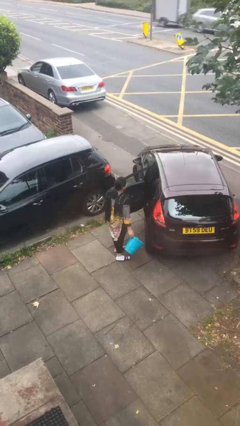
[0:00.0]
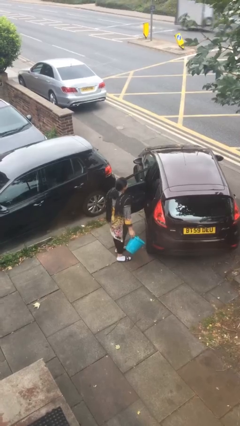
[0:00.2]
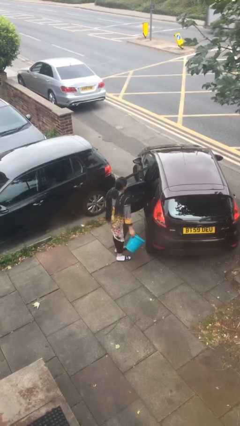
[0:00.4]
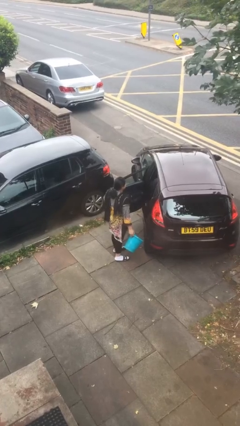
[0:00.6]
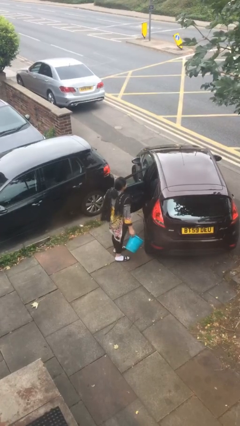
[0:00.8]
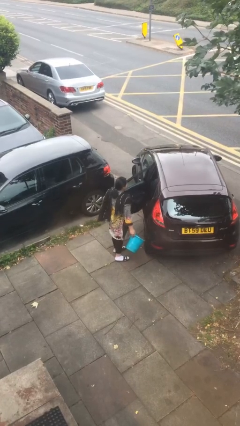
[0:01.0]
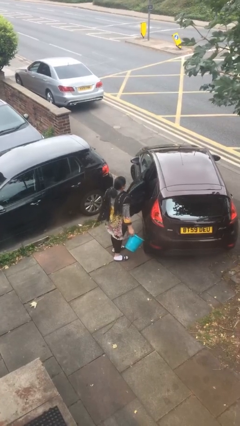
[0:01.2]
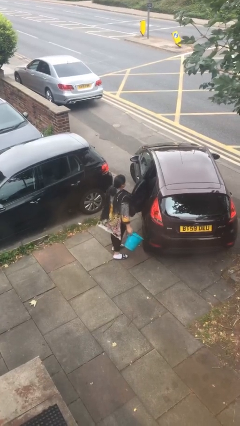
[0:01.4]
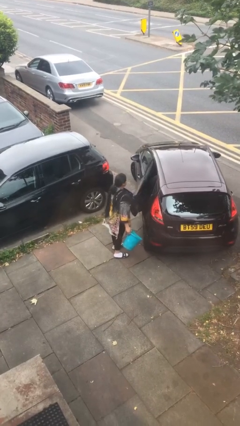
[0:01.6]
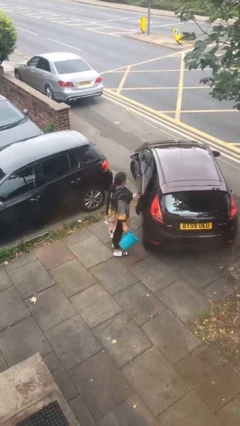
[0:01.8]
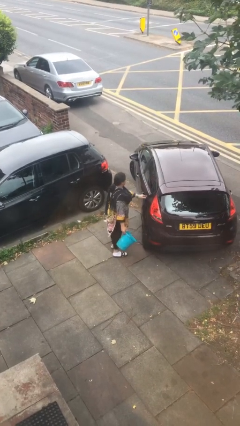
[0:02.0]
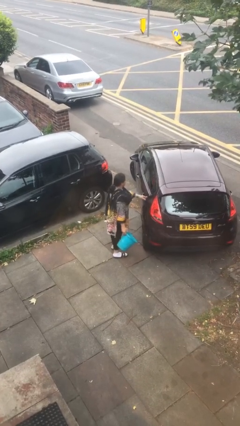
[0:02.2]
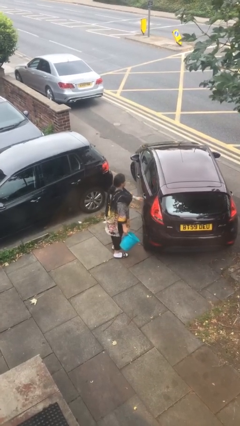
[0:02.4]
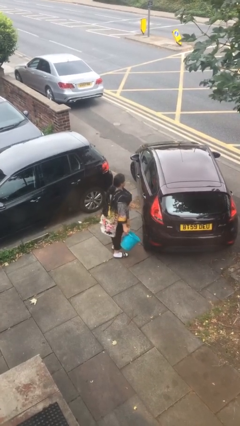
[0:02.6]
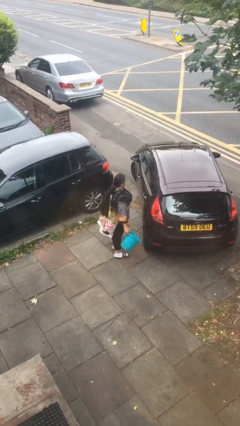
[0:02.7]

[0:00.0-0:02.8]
person closes car door

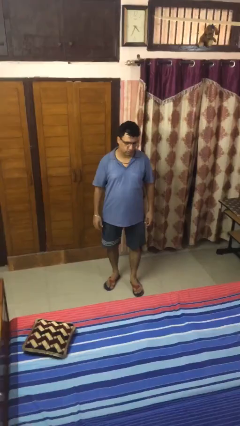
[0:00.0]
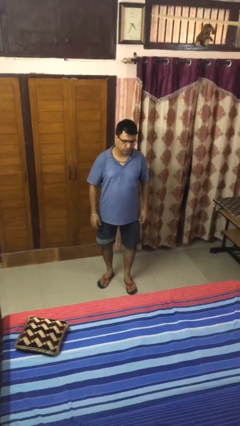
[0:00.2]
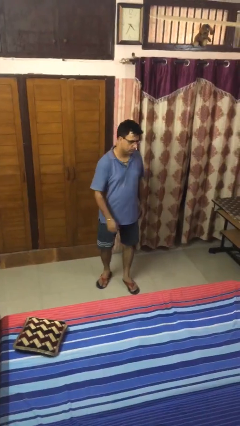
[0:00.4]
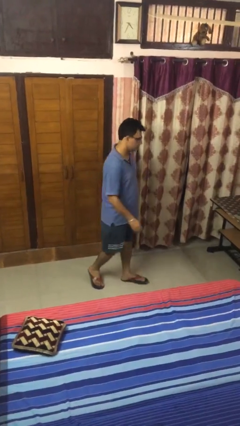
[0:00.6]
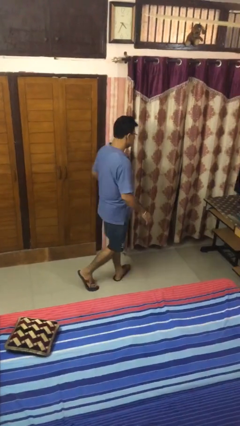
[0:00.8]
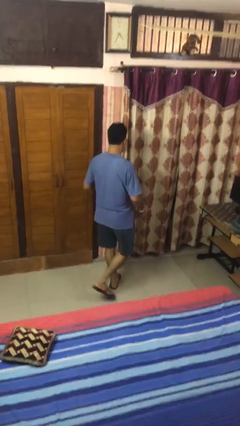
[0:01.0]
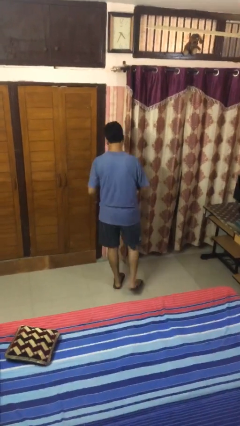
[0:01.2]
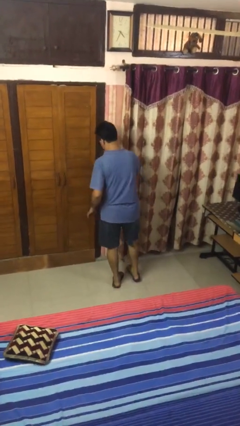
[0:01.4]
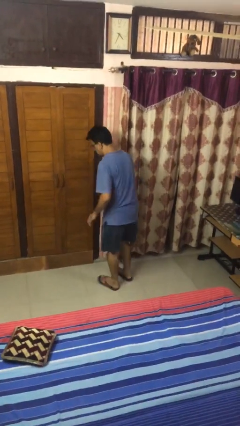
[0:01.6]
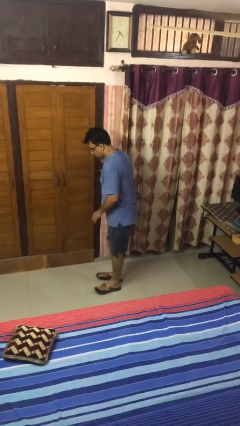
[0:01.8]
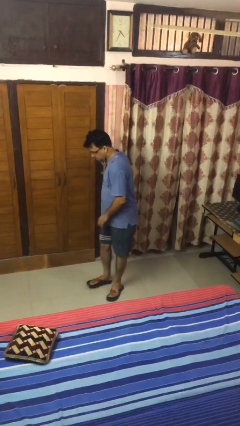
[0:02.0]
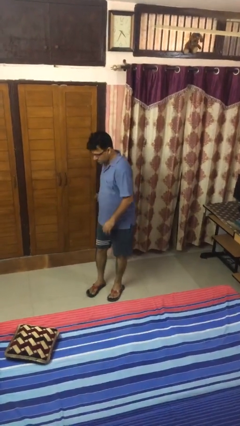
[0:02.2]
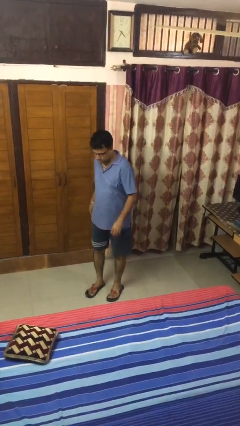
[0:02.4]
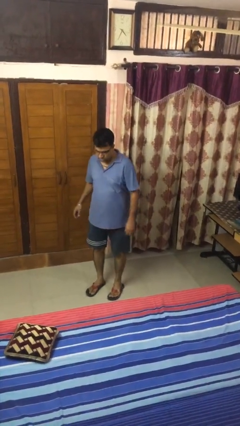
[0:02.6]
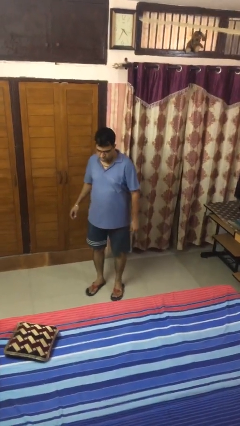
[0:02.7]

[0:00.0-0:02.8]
person twirls

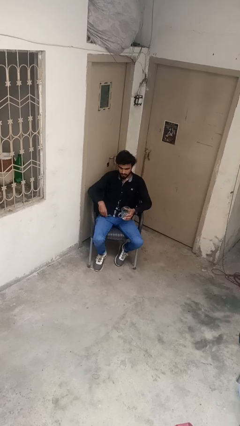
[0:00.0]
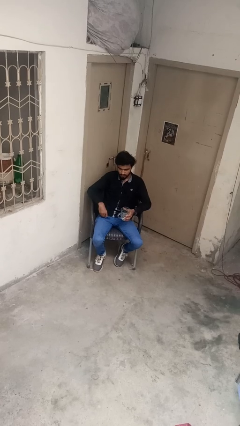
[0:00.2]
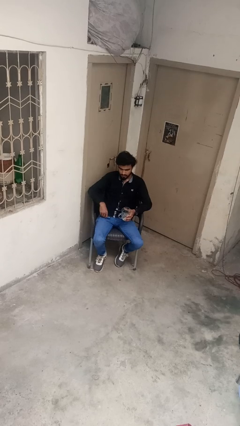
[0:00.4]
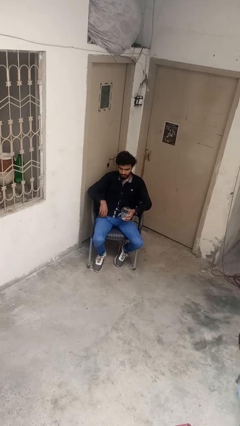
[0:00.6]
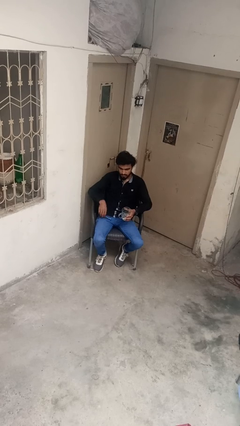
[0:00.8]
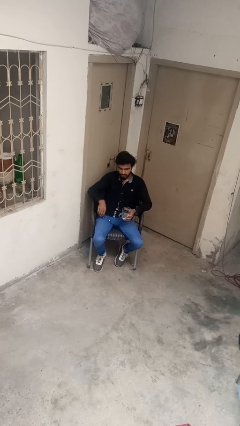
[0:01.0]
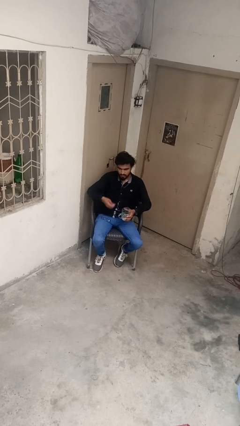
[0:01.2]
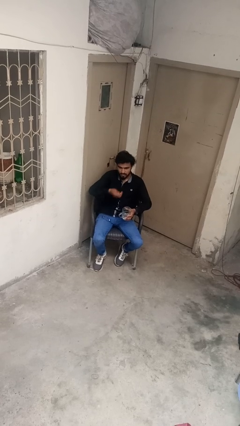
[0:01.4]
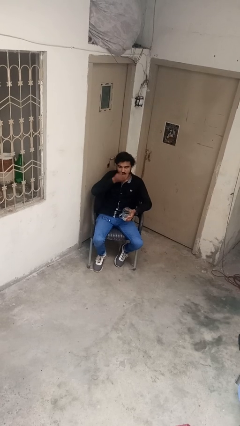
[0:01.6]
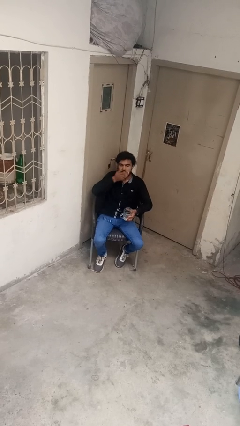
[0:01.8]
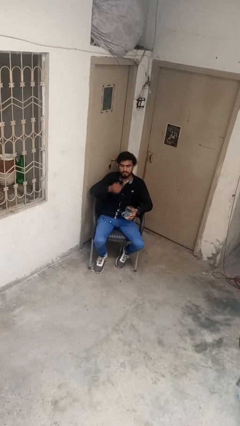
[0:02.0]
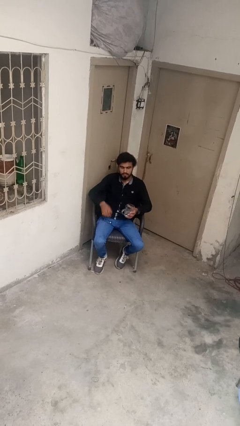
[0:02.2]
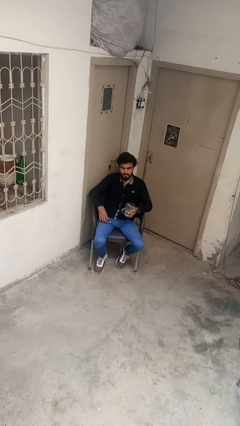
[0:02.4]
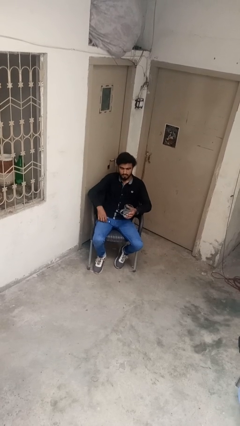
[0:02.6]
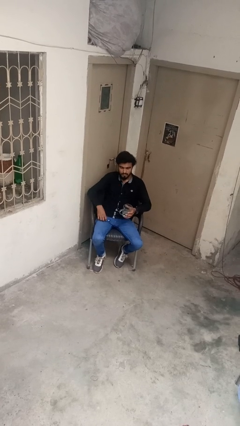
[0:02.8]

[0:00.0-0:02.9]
person takes medicine pills

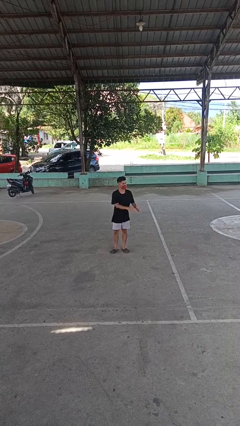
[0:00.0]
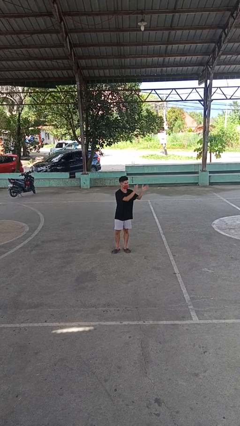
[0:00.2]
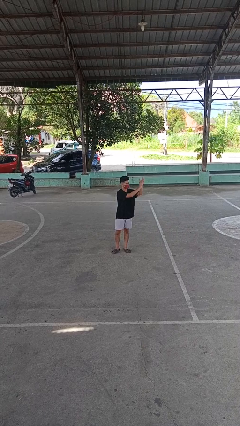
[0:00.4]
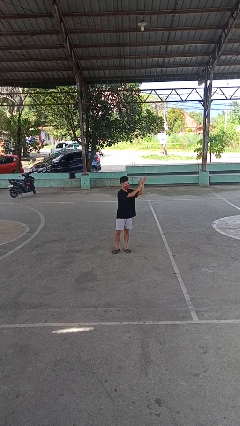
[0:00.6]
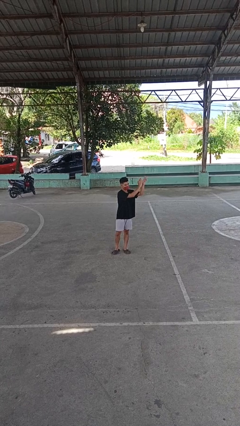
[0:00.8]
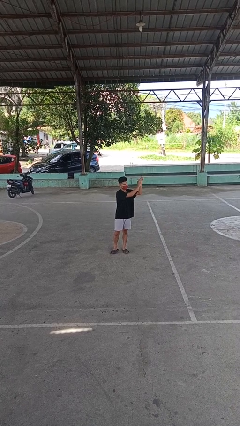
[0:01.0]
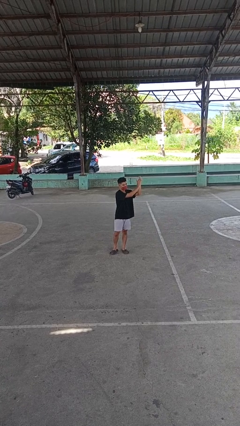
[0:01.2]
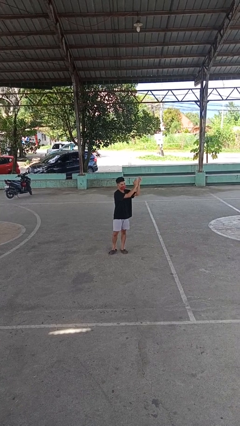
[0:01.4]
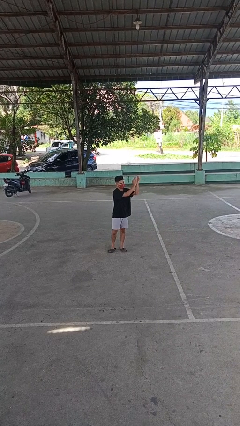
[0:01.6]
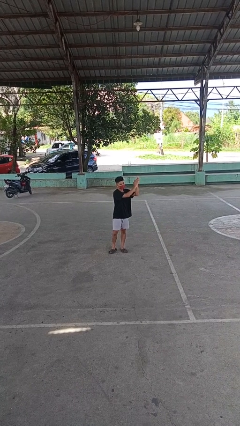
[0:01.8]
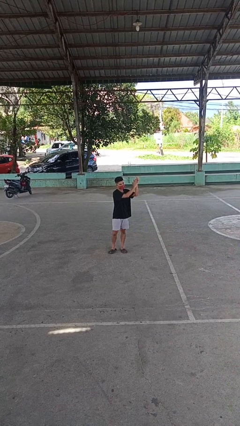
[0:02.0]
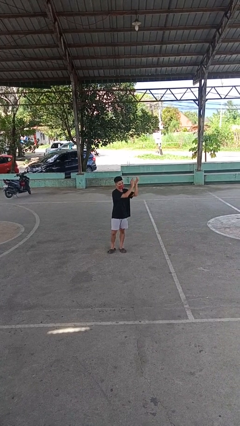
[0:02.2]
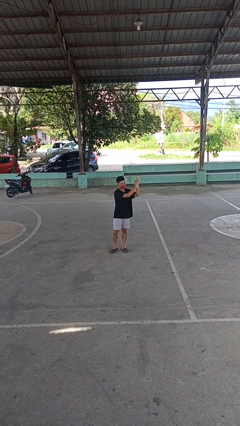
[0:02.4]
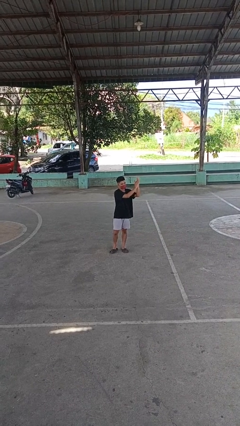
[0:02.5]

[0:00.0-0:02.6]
person claps hands

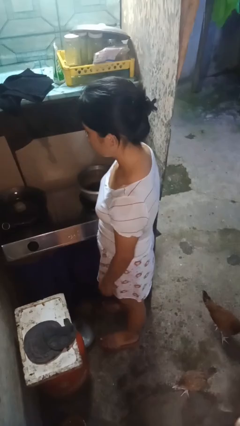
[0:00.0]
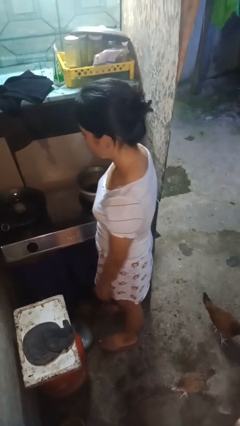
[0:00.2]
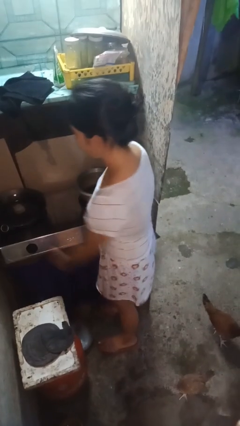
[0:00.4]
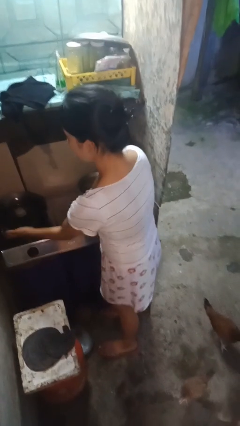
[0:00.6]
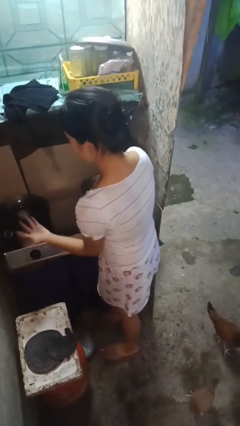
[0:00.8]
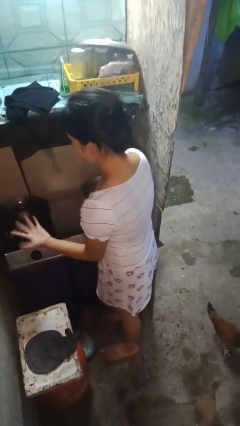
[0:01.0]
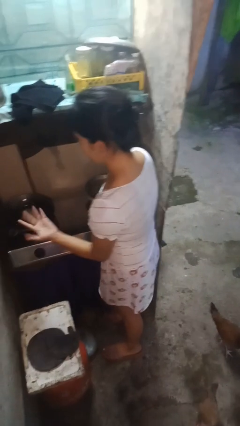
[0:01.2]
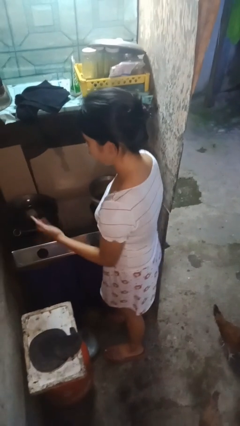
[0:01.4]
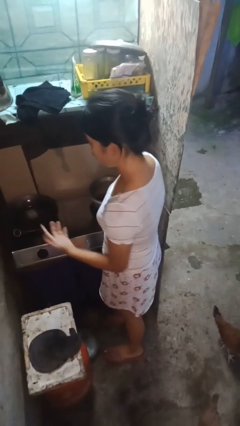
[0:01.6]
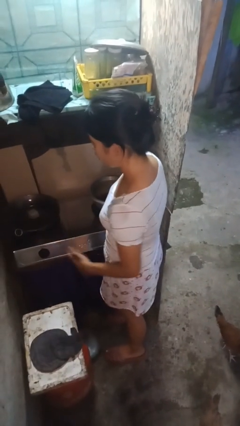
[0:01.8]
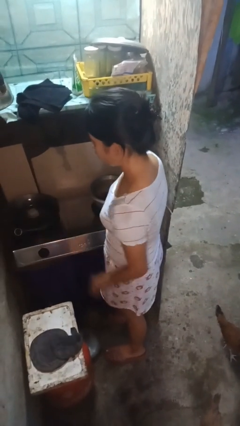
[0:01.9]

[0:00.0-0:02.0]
person burns hand

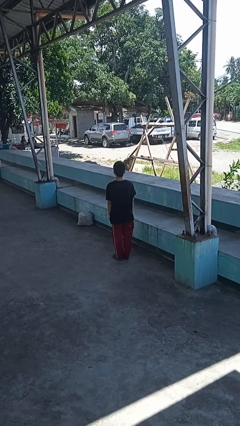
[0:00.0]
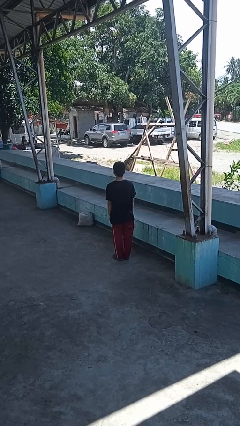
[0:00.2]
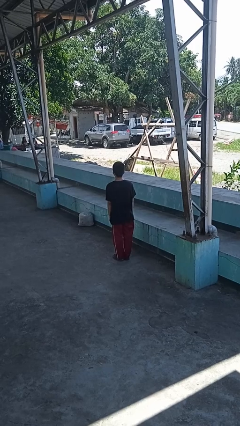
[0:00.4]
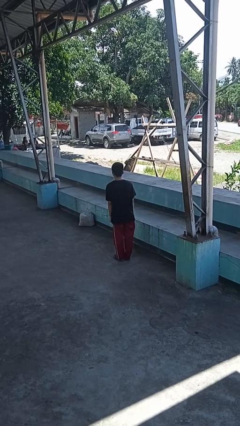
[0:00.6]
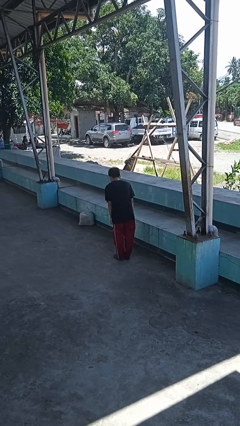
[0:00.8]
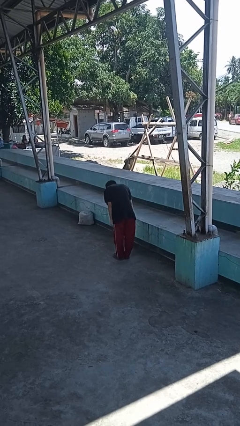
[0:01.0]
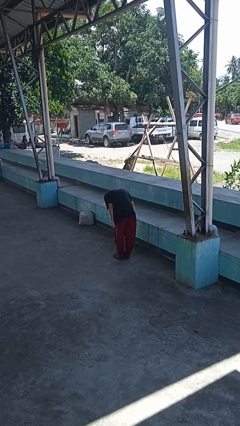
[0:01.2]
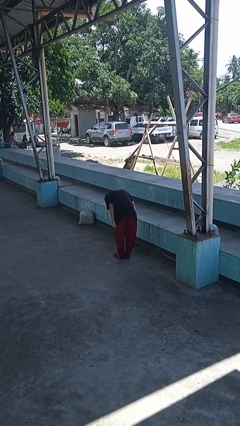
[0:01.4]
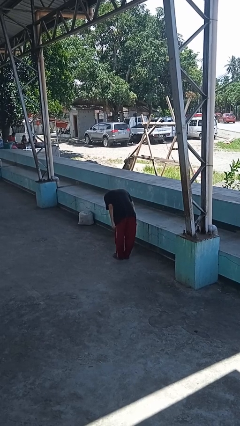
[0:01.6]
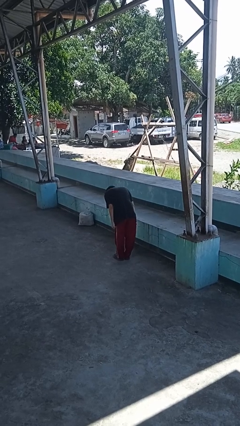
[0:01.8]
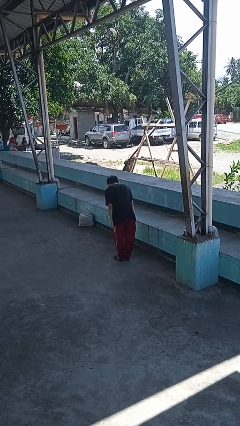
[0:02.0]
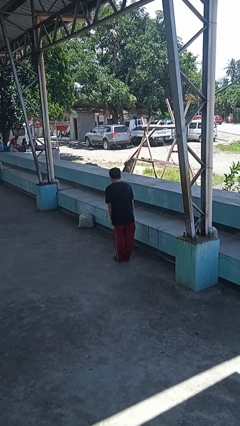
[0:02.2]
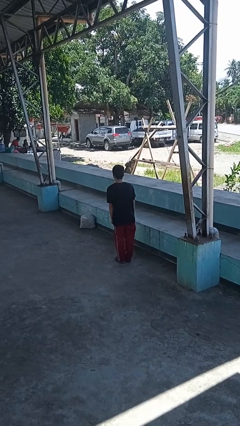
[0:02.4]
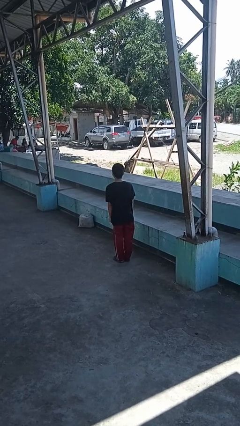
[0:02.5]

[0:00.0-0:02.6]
person bows

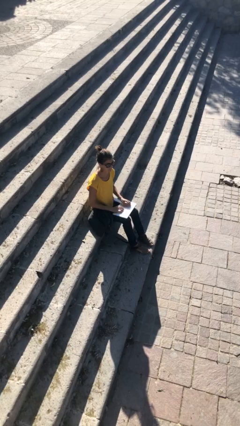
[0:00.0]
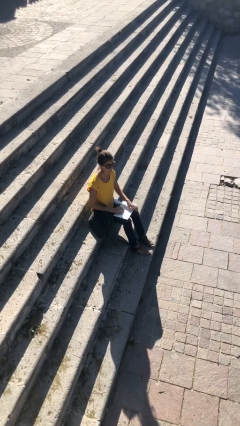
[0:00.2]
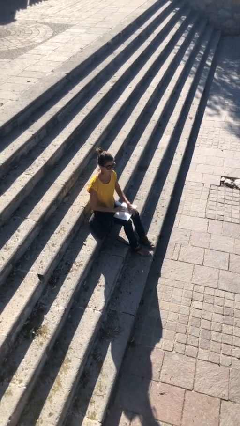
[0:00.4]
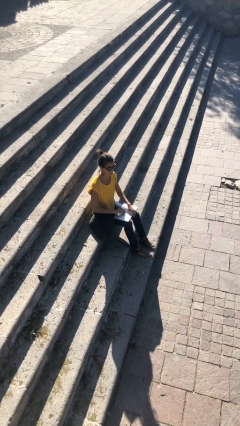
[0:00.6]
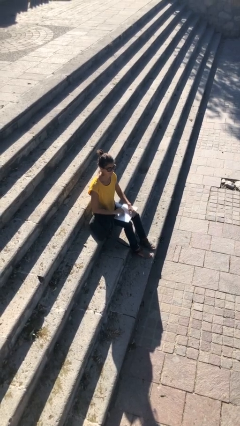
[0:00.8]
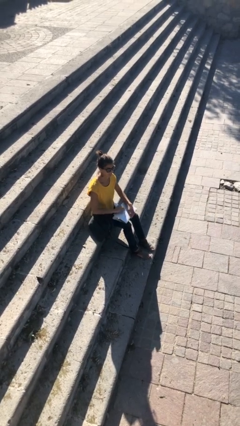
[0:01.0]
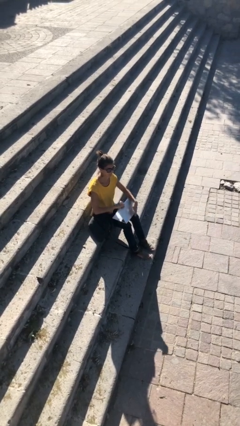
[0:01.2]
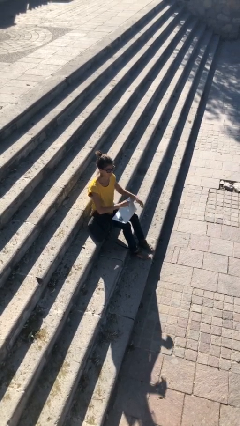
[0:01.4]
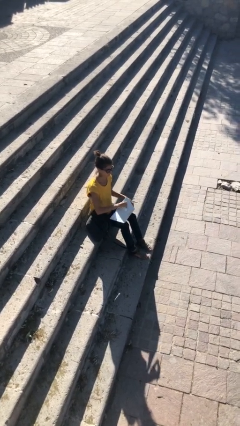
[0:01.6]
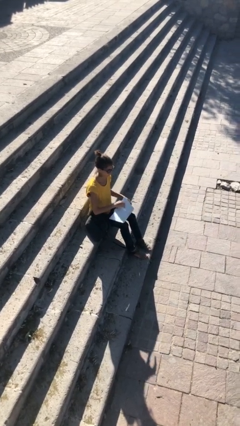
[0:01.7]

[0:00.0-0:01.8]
person interacts with laptop
